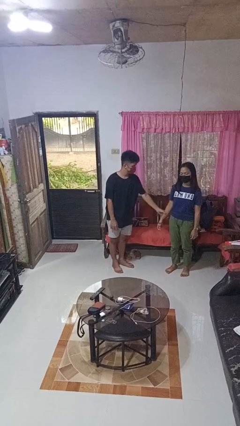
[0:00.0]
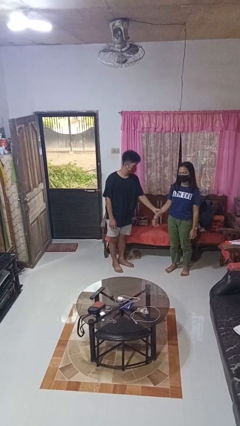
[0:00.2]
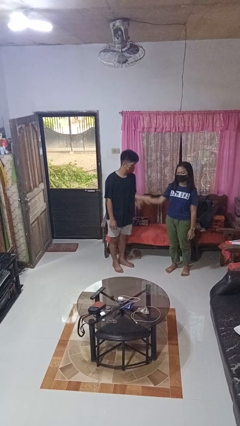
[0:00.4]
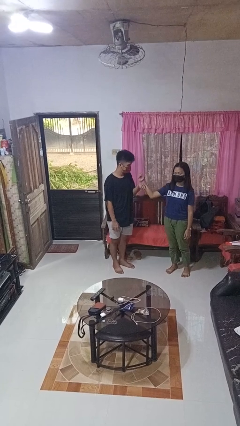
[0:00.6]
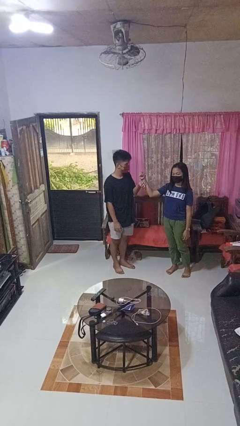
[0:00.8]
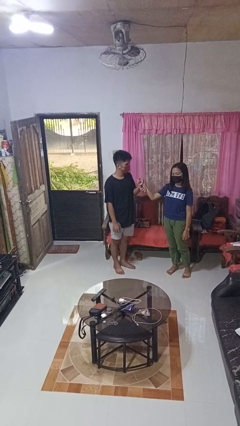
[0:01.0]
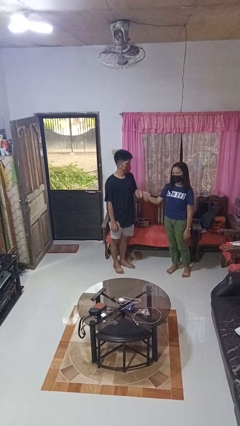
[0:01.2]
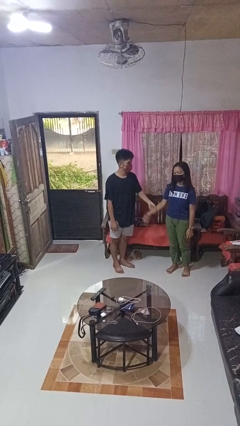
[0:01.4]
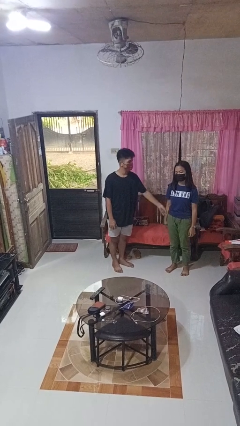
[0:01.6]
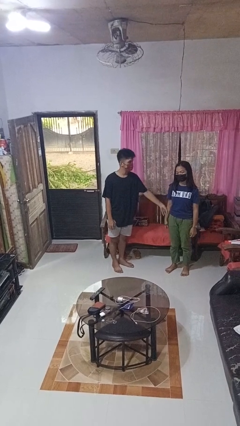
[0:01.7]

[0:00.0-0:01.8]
person grabs person by forearm

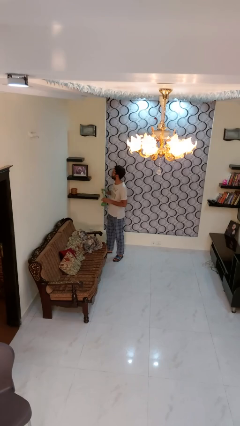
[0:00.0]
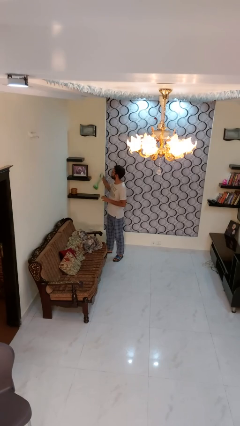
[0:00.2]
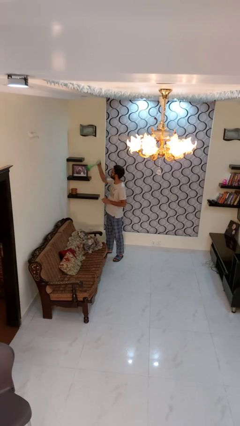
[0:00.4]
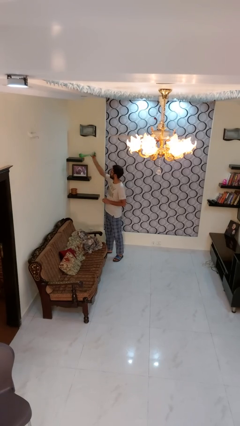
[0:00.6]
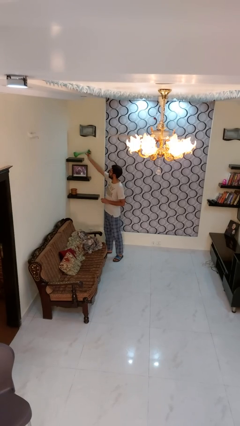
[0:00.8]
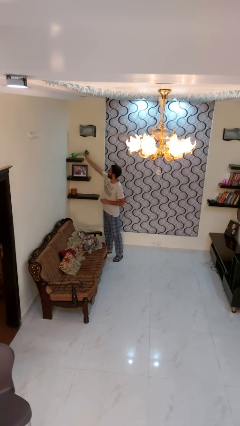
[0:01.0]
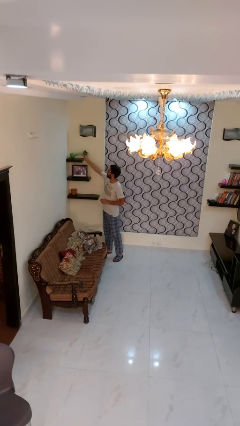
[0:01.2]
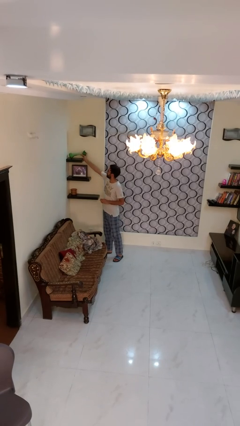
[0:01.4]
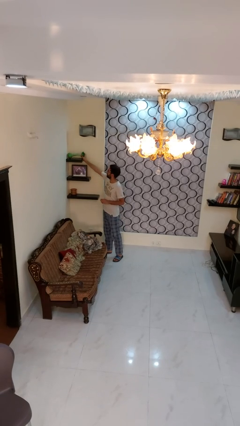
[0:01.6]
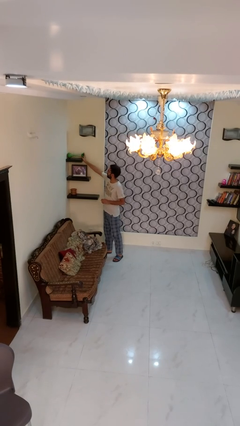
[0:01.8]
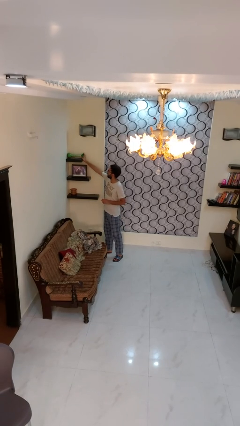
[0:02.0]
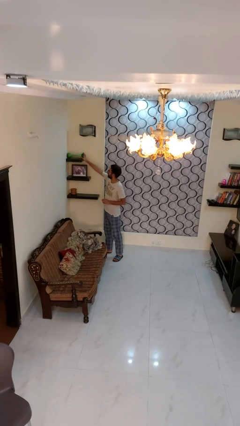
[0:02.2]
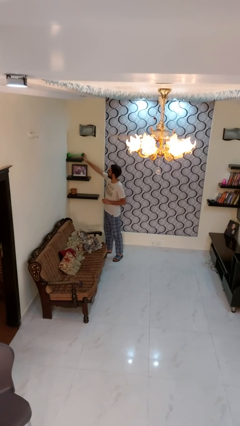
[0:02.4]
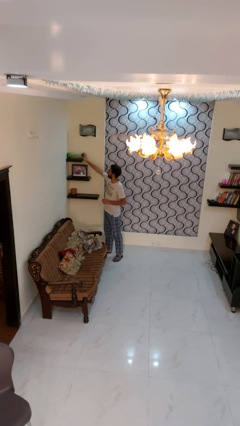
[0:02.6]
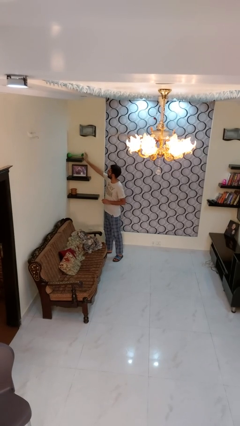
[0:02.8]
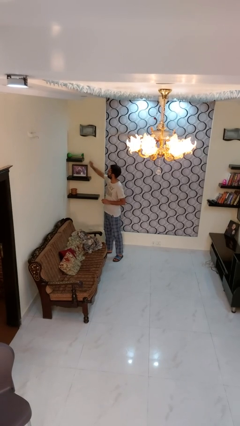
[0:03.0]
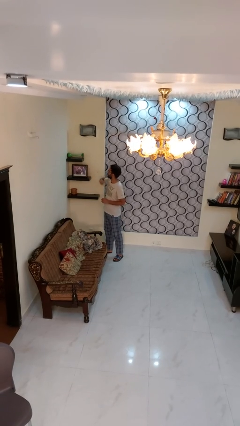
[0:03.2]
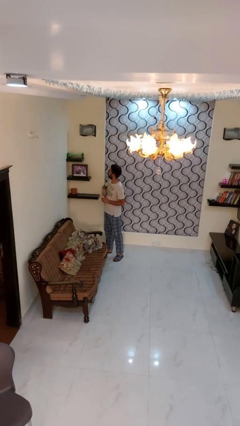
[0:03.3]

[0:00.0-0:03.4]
person puts down object on shelf

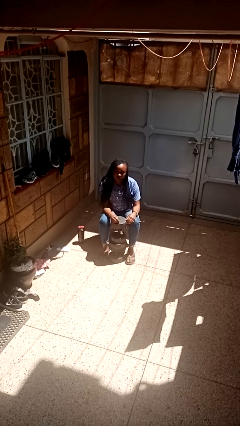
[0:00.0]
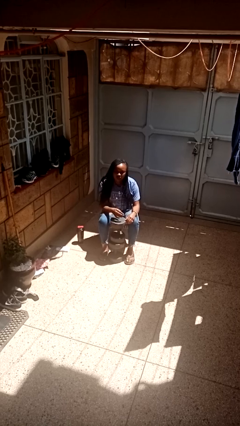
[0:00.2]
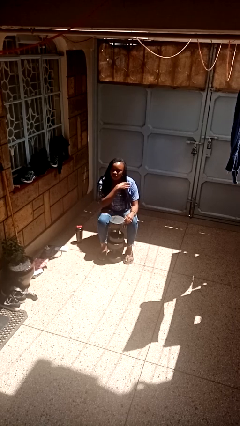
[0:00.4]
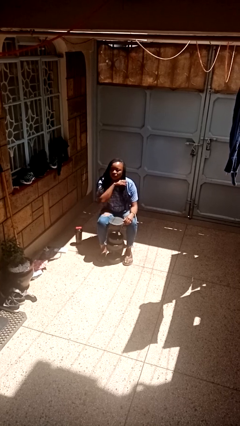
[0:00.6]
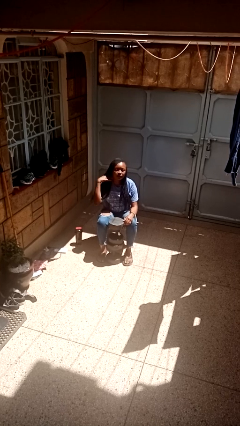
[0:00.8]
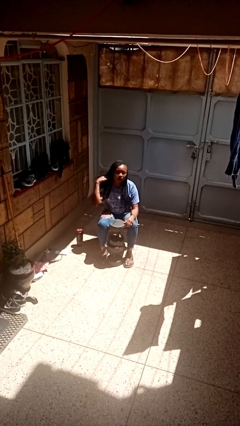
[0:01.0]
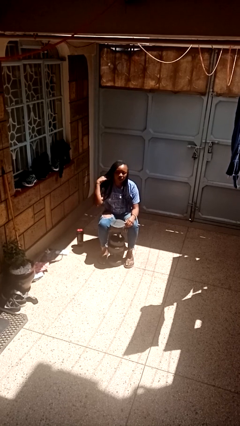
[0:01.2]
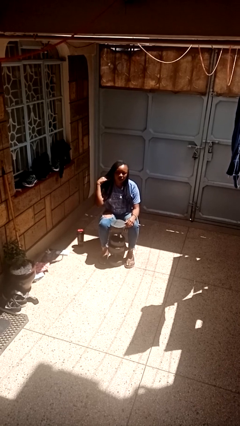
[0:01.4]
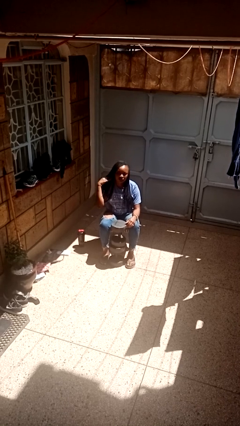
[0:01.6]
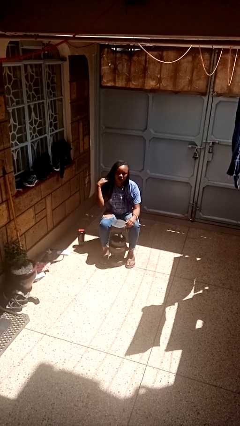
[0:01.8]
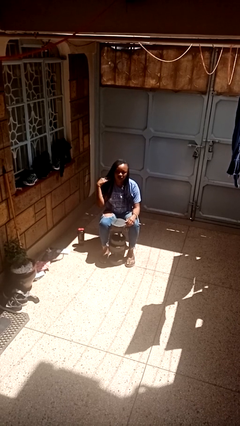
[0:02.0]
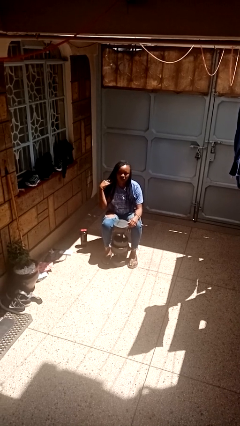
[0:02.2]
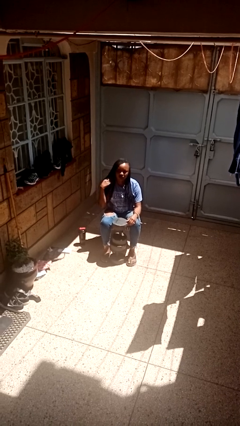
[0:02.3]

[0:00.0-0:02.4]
person gestures cut

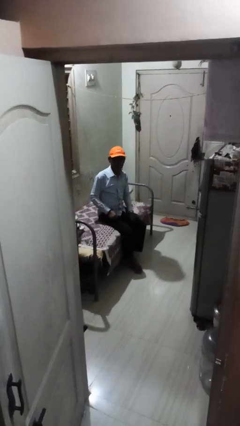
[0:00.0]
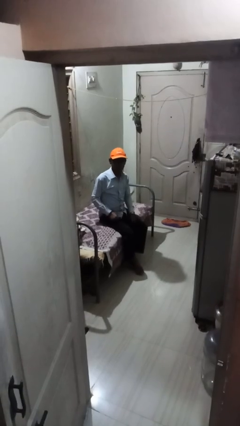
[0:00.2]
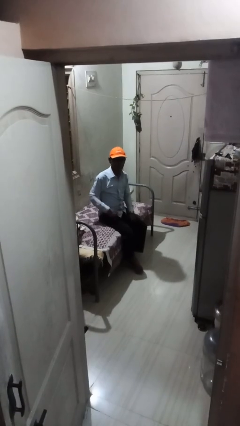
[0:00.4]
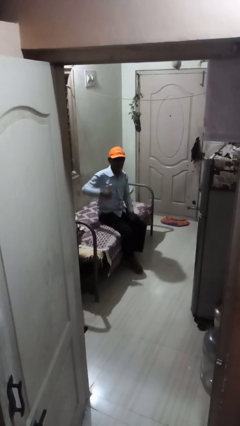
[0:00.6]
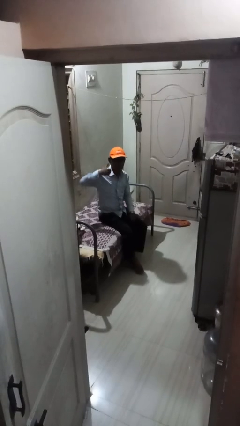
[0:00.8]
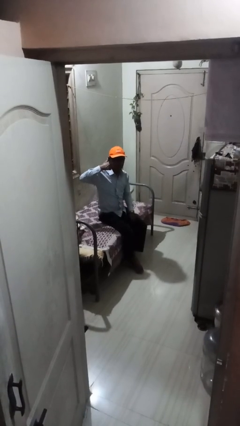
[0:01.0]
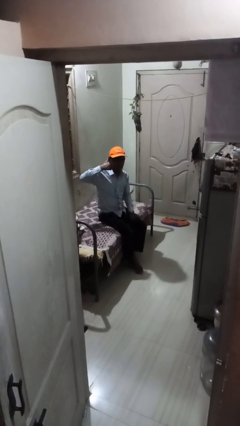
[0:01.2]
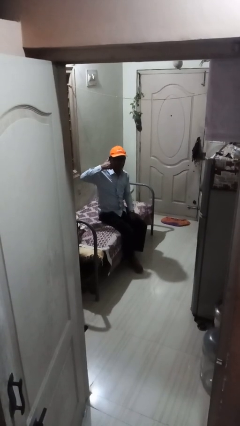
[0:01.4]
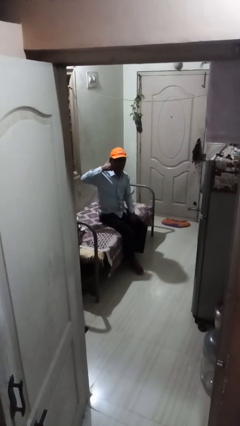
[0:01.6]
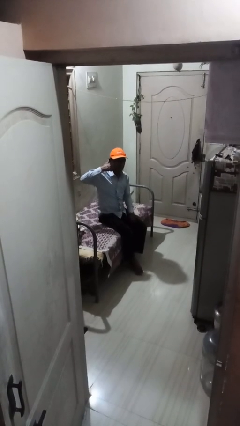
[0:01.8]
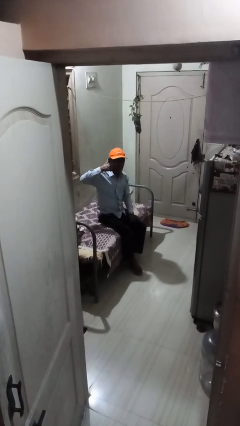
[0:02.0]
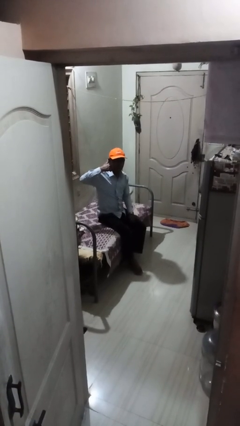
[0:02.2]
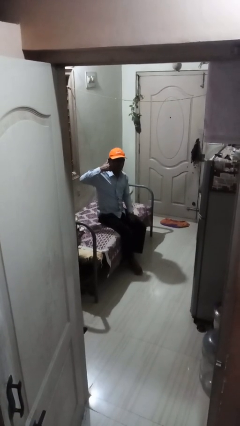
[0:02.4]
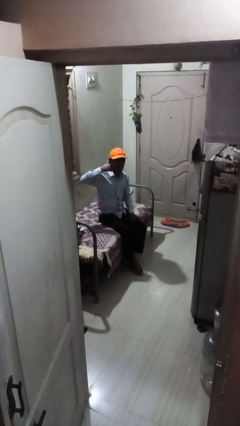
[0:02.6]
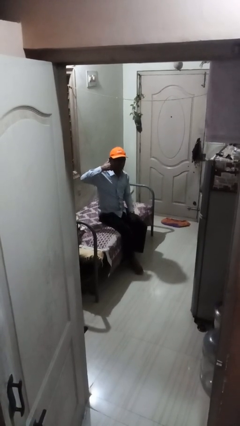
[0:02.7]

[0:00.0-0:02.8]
person gestures call me

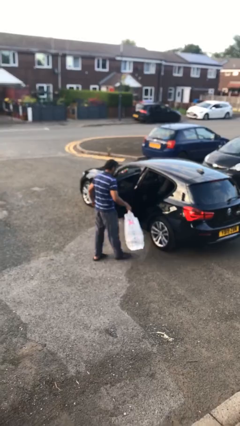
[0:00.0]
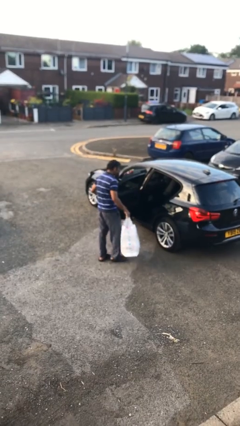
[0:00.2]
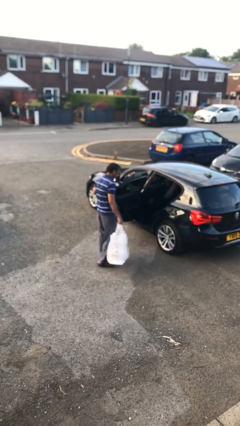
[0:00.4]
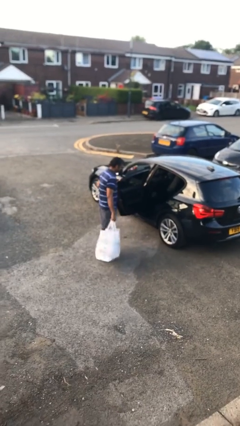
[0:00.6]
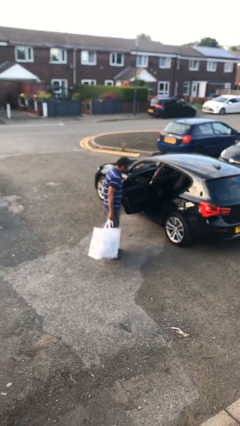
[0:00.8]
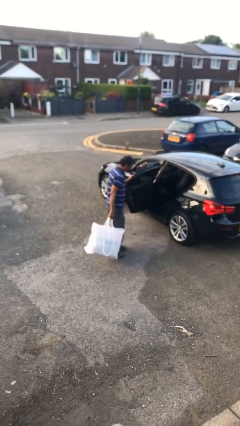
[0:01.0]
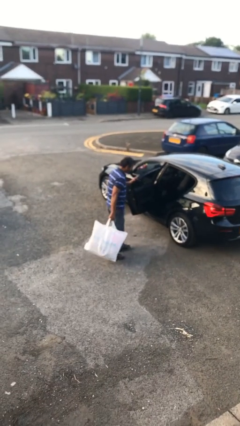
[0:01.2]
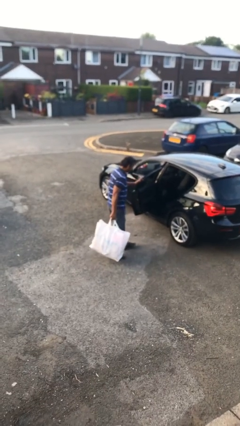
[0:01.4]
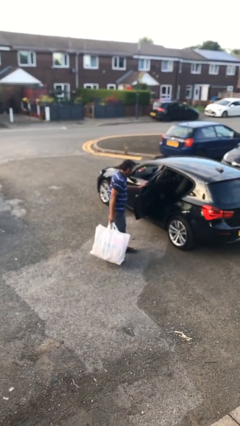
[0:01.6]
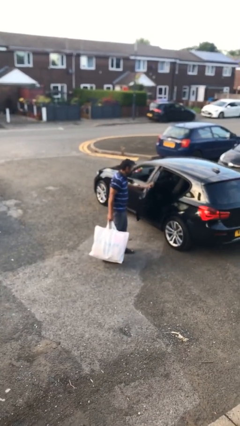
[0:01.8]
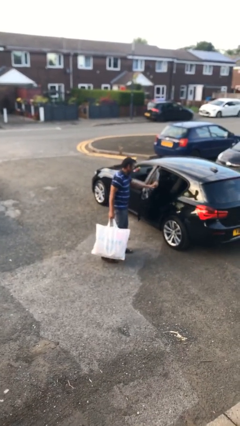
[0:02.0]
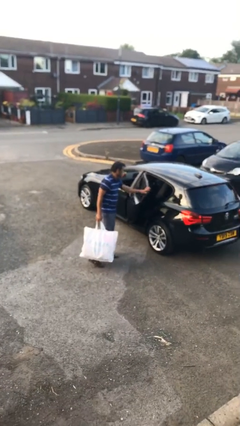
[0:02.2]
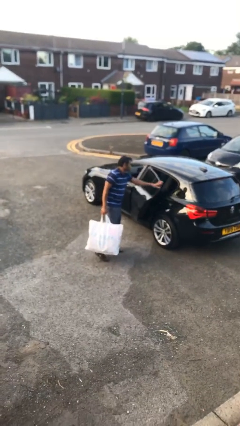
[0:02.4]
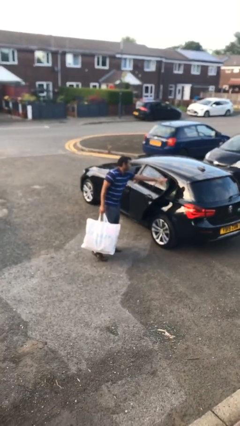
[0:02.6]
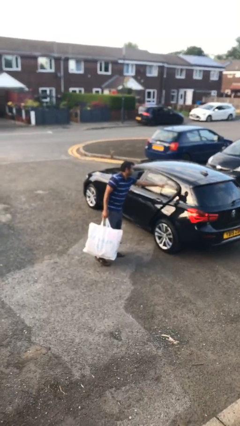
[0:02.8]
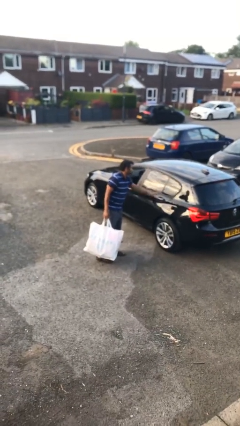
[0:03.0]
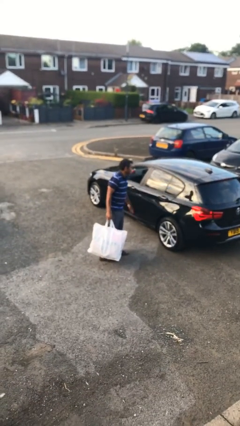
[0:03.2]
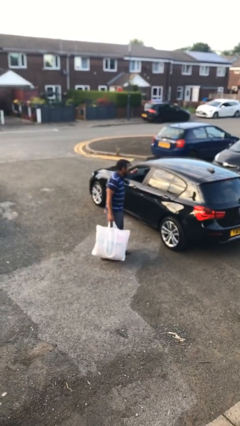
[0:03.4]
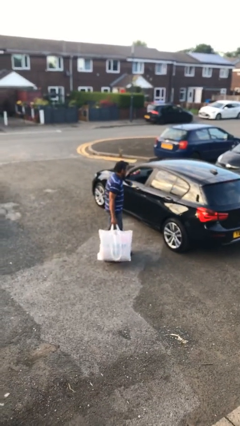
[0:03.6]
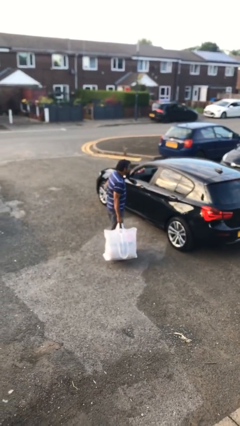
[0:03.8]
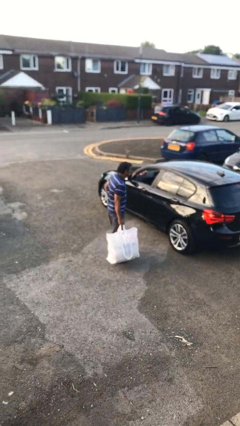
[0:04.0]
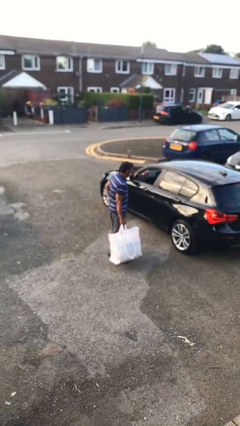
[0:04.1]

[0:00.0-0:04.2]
person closes car door

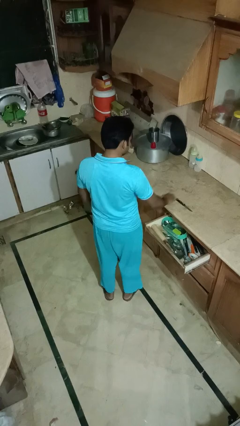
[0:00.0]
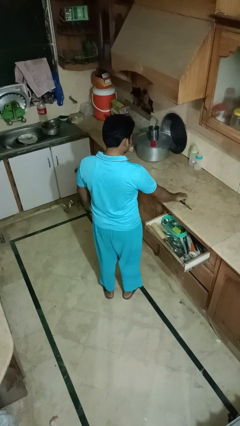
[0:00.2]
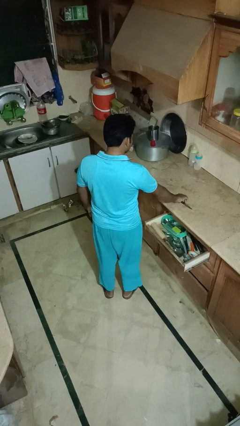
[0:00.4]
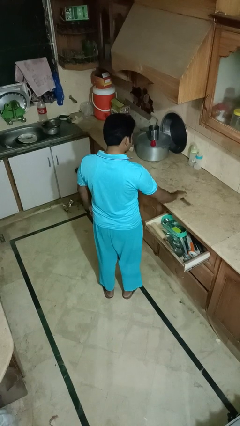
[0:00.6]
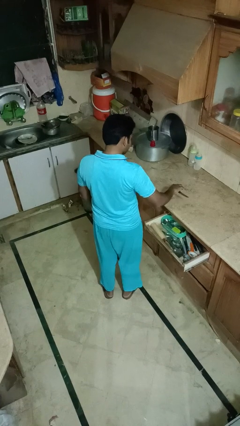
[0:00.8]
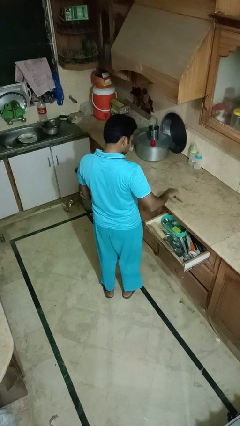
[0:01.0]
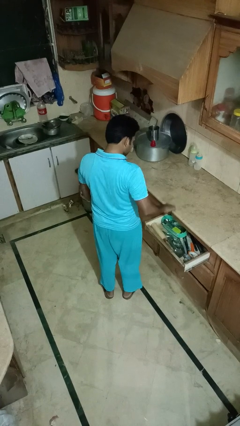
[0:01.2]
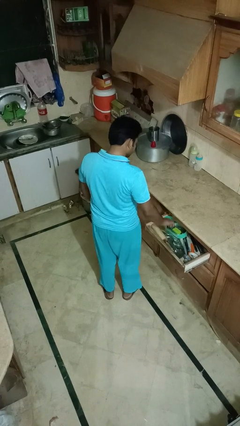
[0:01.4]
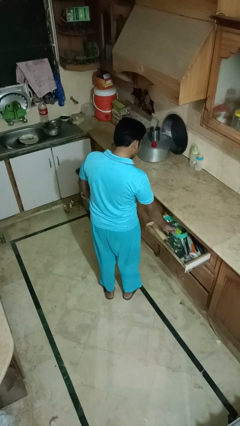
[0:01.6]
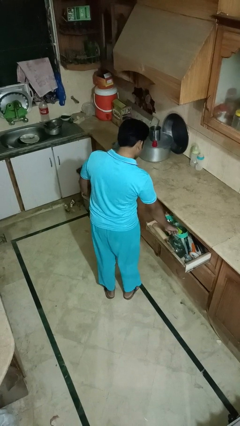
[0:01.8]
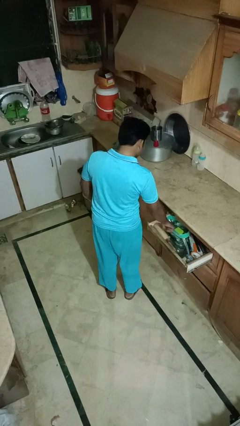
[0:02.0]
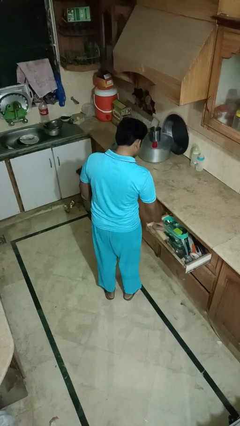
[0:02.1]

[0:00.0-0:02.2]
person puts object into kitchen drawer

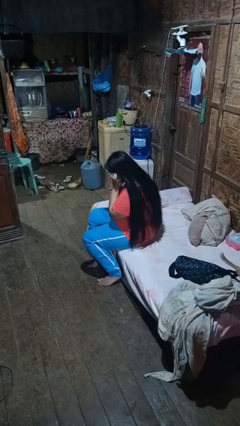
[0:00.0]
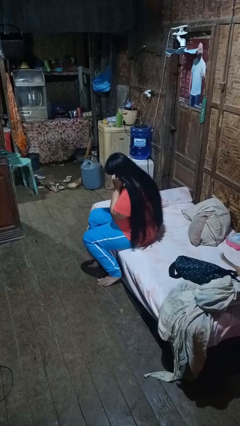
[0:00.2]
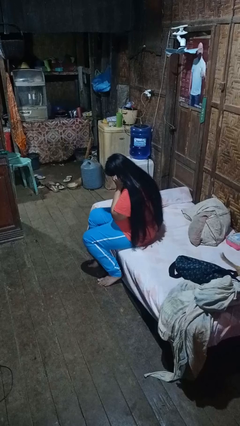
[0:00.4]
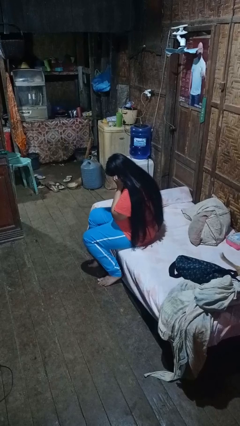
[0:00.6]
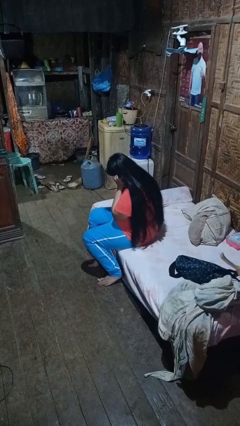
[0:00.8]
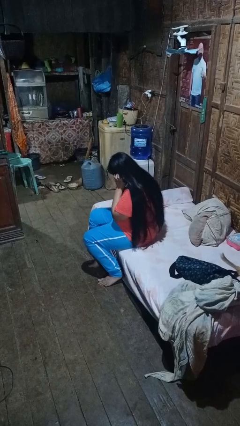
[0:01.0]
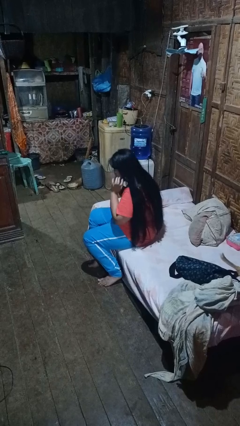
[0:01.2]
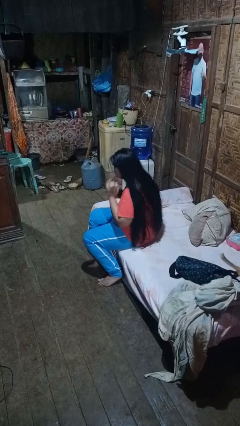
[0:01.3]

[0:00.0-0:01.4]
person puts fingers in ear
